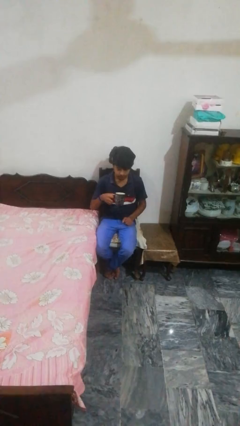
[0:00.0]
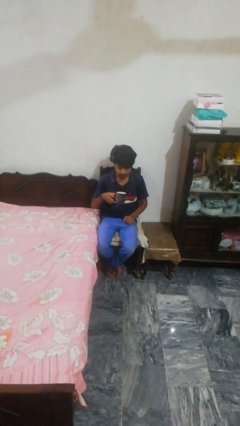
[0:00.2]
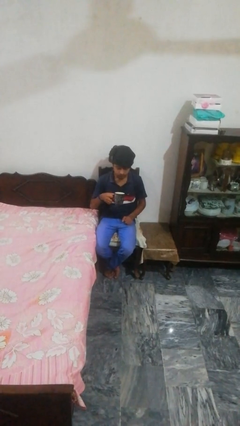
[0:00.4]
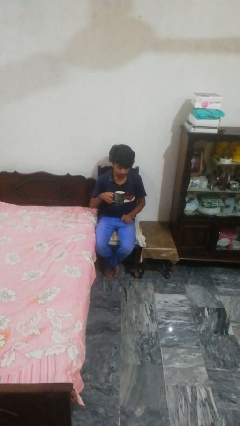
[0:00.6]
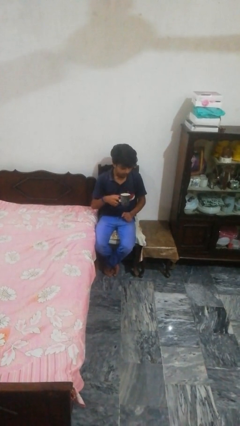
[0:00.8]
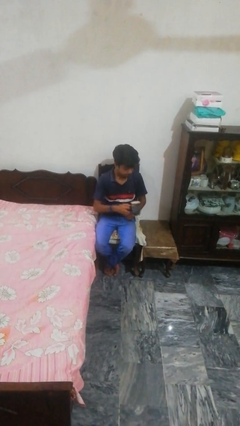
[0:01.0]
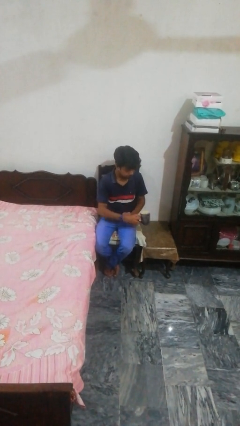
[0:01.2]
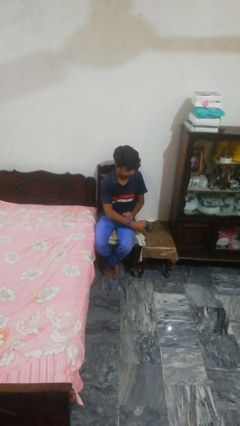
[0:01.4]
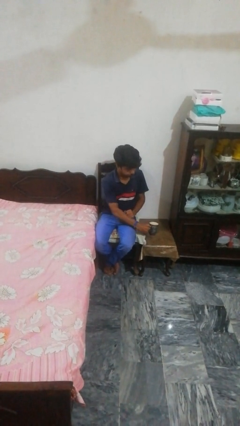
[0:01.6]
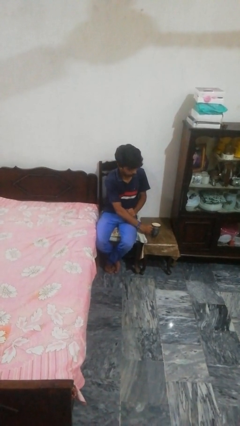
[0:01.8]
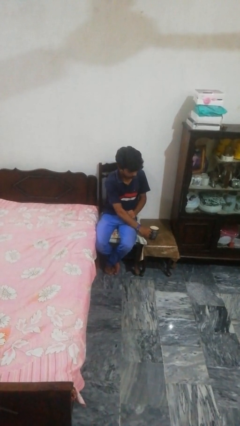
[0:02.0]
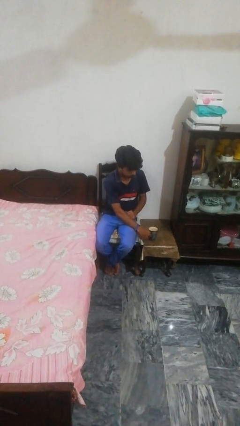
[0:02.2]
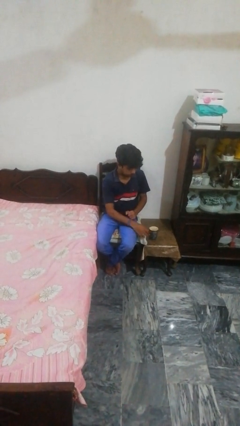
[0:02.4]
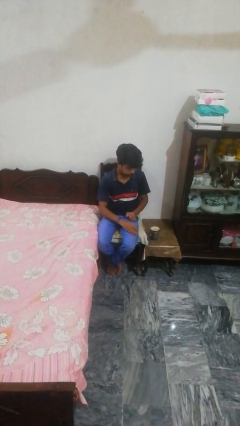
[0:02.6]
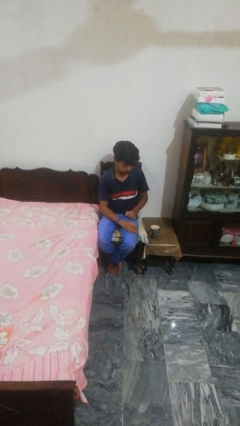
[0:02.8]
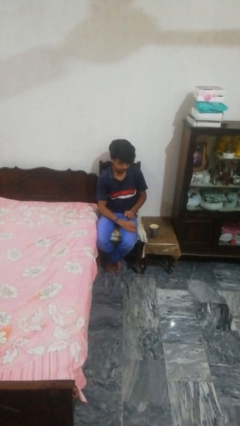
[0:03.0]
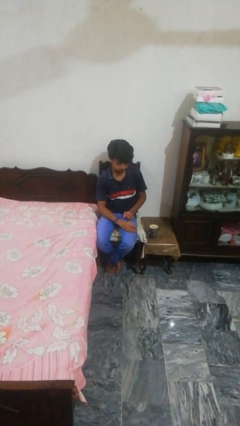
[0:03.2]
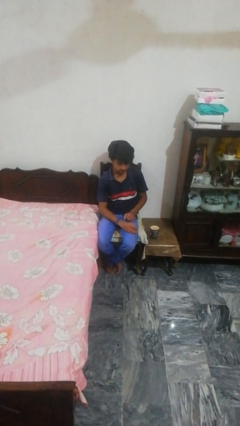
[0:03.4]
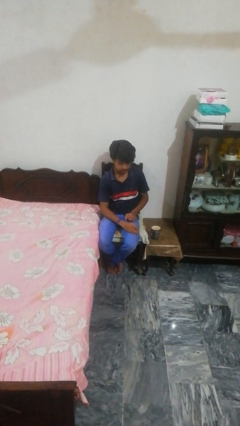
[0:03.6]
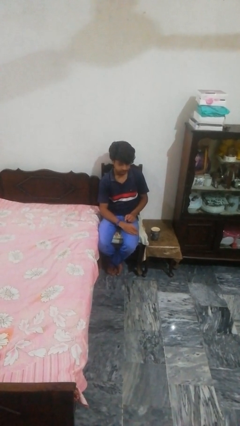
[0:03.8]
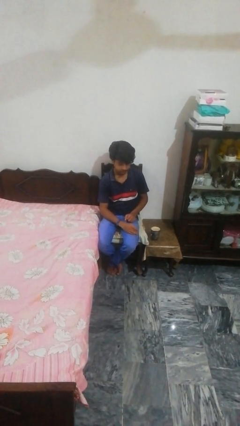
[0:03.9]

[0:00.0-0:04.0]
person puts down object on table

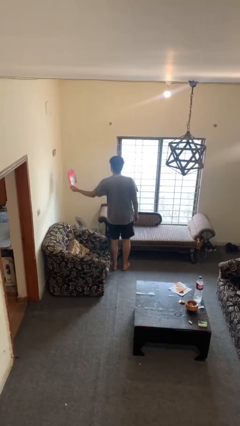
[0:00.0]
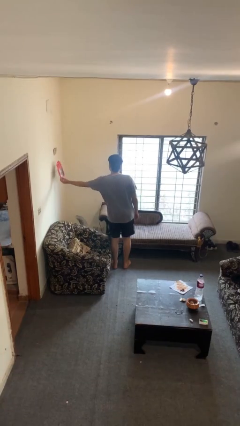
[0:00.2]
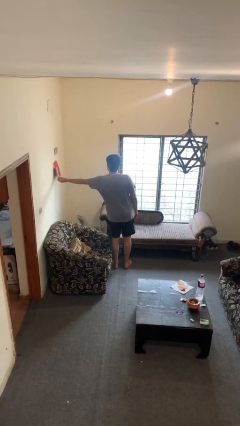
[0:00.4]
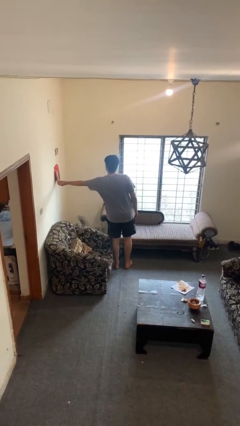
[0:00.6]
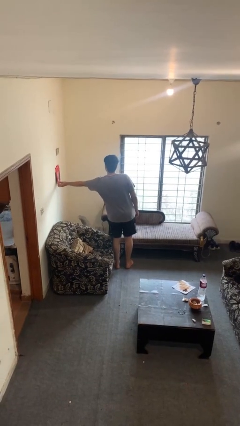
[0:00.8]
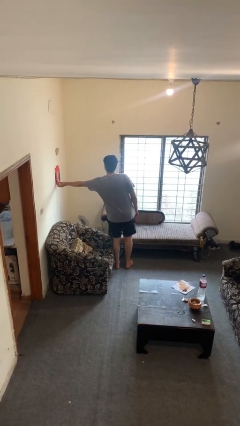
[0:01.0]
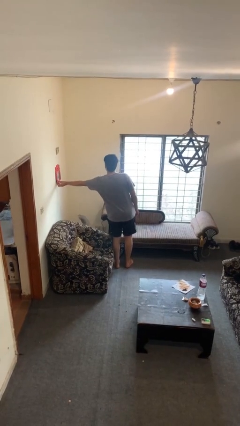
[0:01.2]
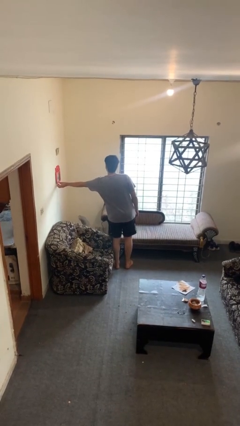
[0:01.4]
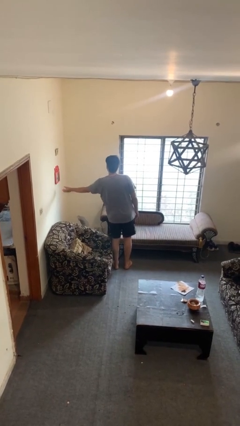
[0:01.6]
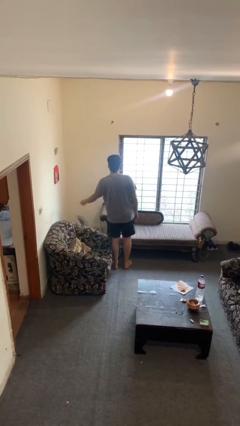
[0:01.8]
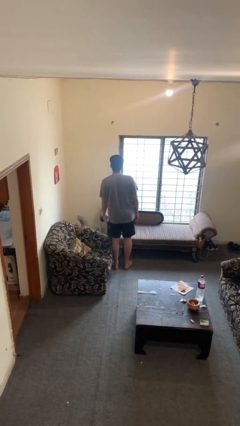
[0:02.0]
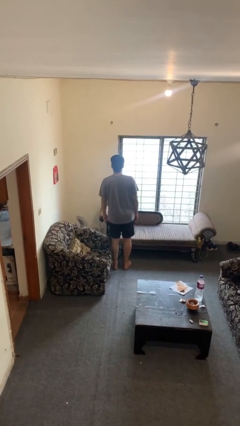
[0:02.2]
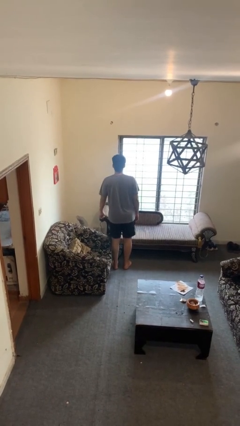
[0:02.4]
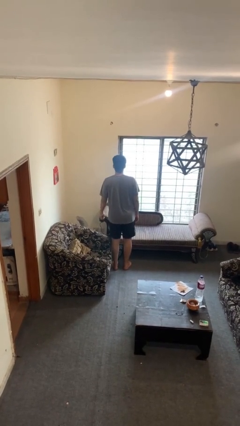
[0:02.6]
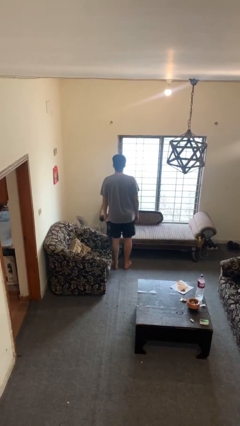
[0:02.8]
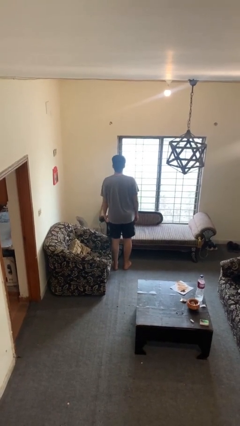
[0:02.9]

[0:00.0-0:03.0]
person puts up picture frame

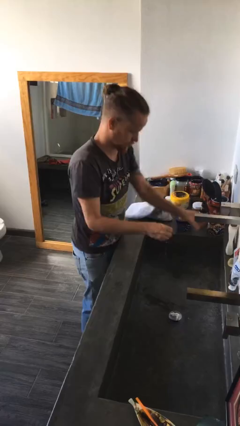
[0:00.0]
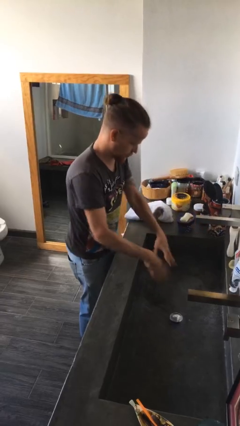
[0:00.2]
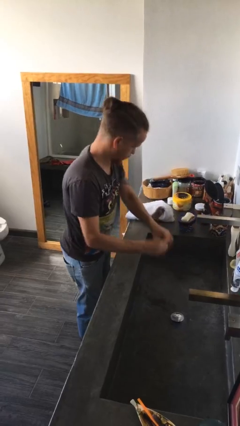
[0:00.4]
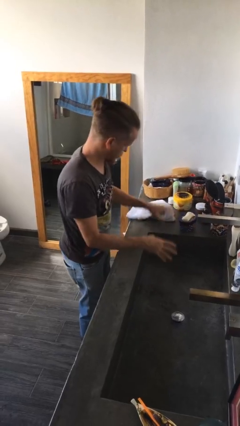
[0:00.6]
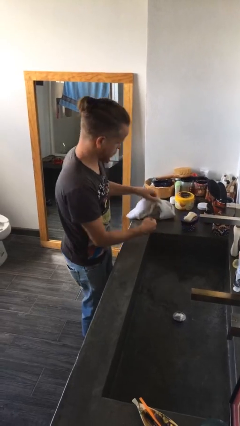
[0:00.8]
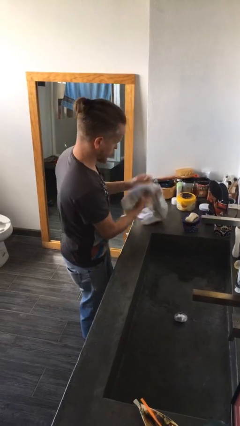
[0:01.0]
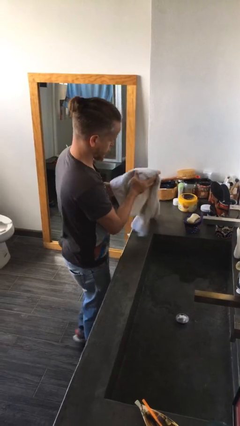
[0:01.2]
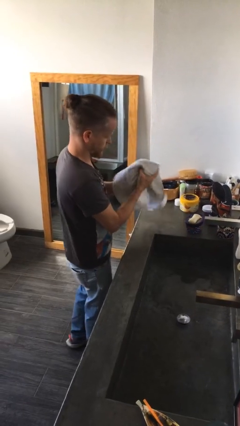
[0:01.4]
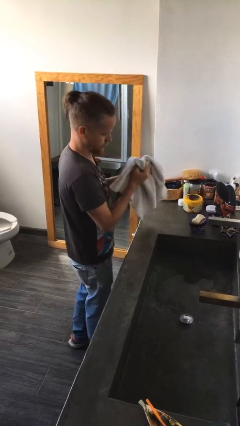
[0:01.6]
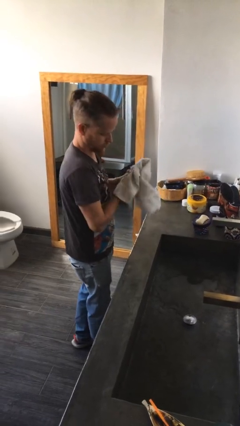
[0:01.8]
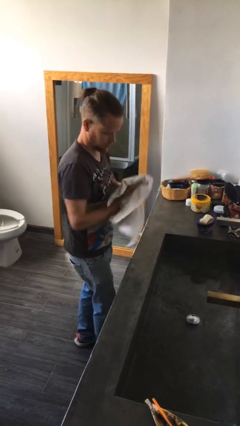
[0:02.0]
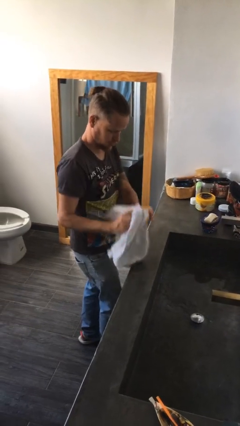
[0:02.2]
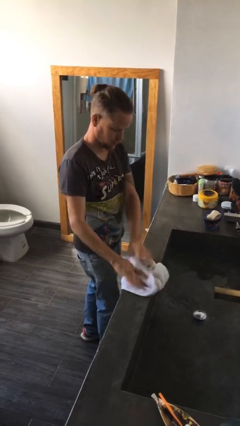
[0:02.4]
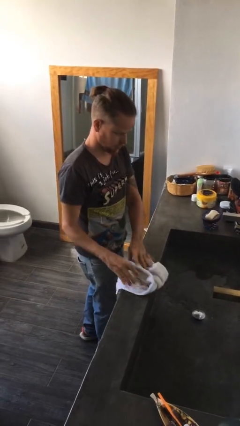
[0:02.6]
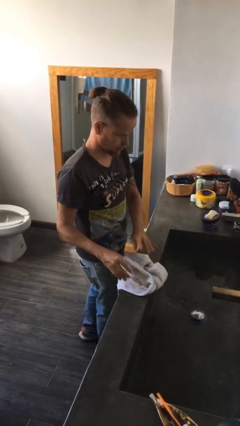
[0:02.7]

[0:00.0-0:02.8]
person dries hands with towel

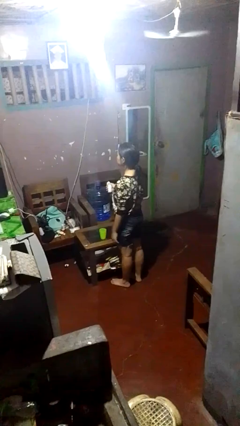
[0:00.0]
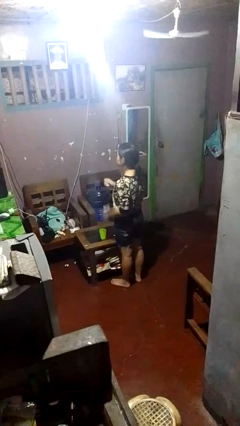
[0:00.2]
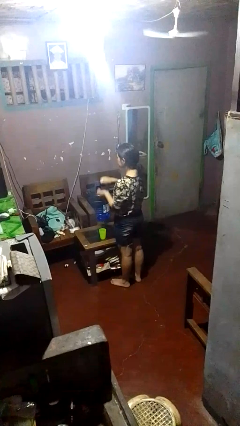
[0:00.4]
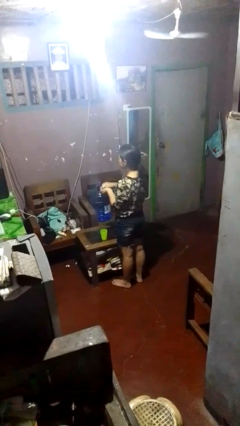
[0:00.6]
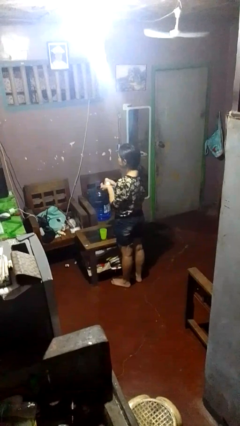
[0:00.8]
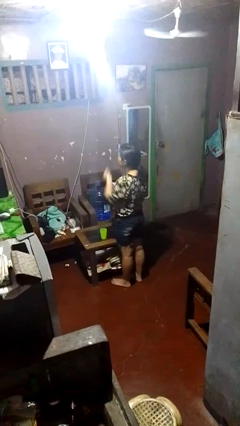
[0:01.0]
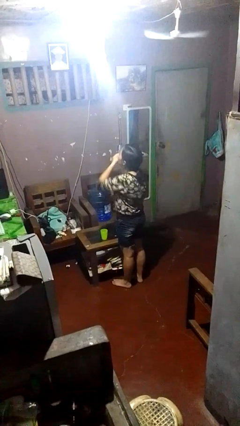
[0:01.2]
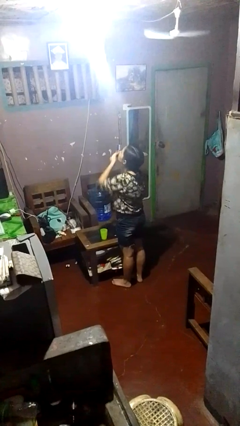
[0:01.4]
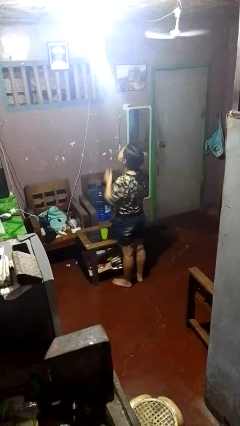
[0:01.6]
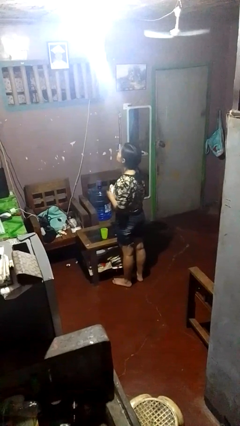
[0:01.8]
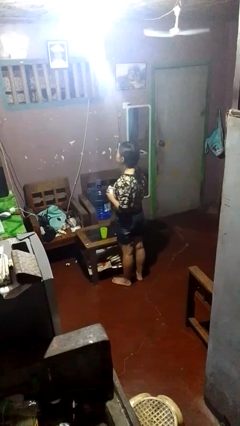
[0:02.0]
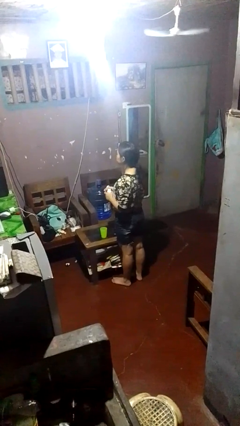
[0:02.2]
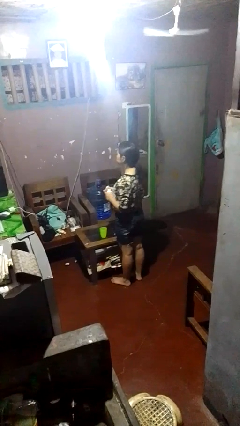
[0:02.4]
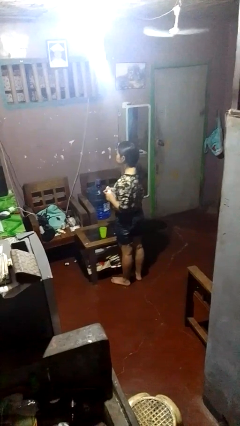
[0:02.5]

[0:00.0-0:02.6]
person takes medicine pills

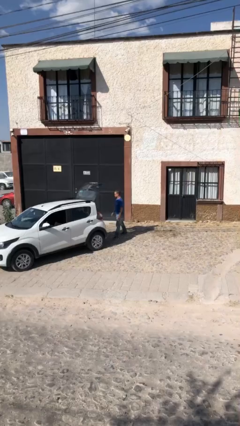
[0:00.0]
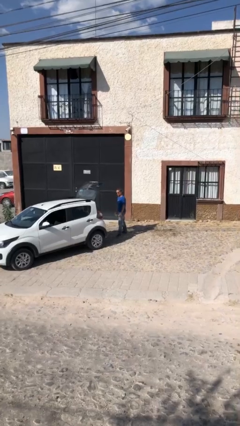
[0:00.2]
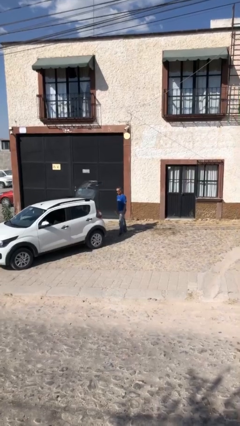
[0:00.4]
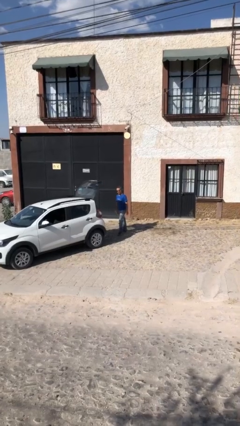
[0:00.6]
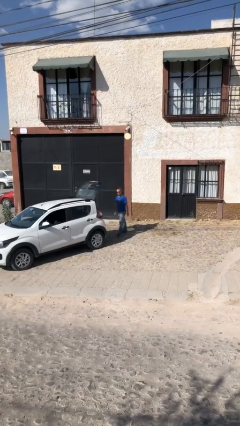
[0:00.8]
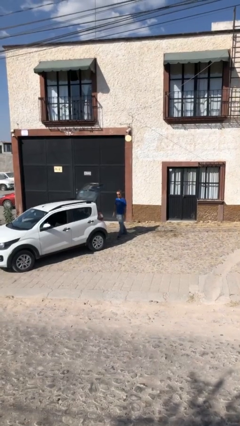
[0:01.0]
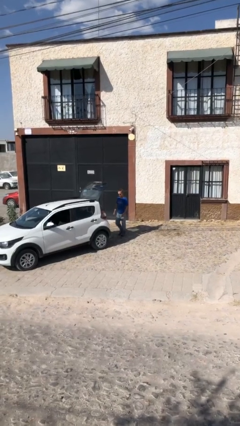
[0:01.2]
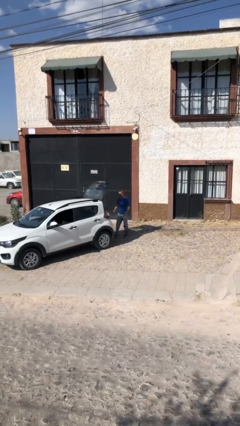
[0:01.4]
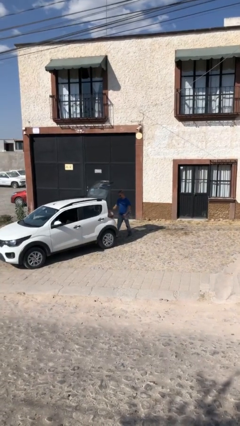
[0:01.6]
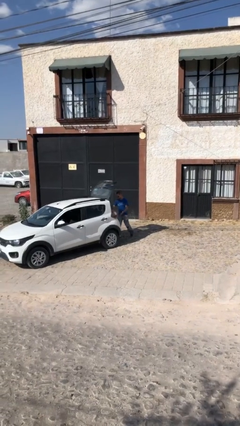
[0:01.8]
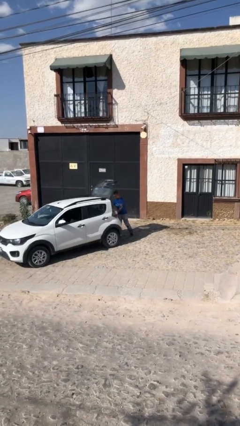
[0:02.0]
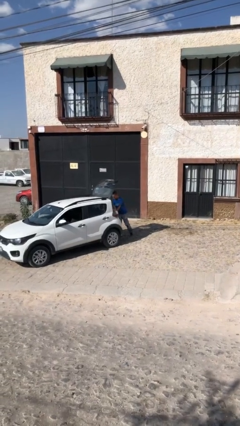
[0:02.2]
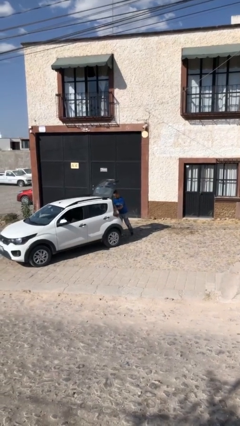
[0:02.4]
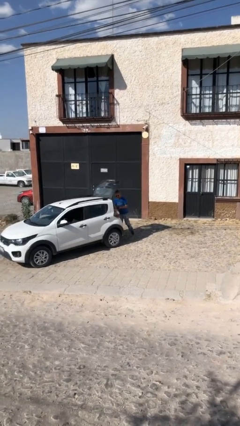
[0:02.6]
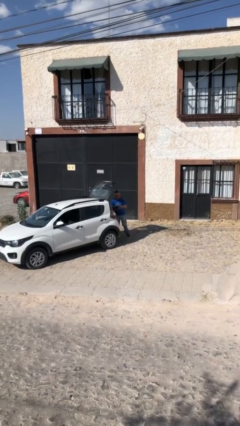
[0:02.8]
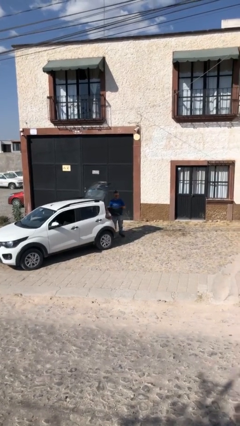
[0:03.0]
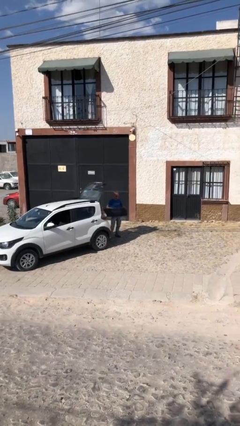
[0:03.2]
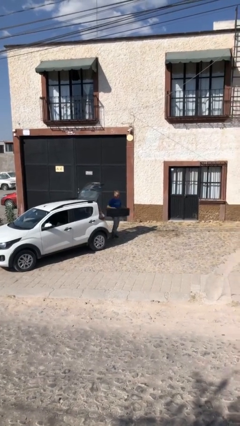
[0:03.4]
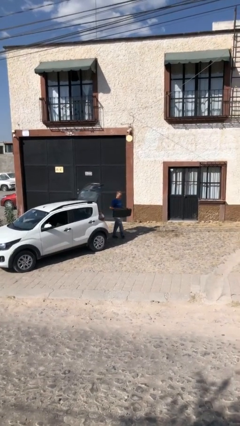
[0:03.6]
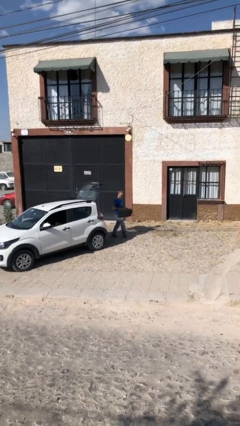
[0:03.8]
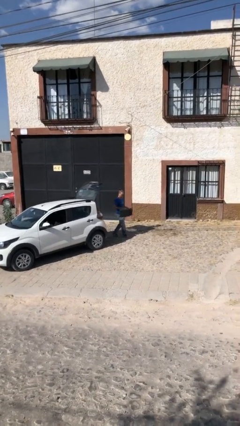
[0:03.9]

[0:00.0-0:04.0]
person unloads car

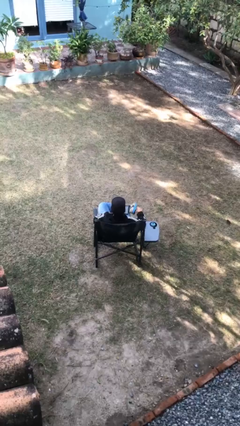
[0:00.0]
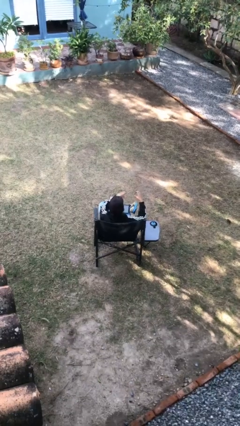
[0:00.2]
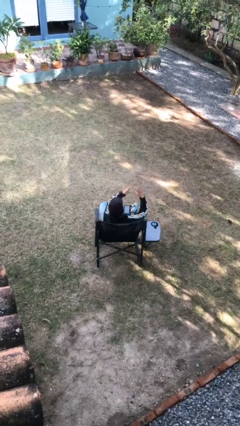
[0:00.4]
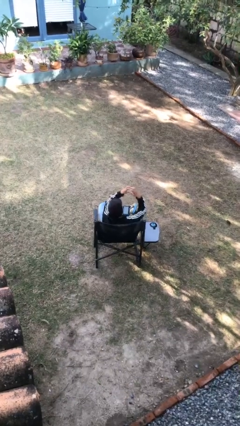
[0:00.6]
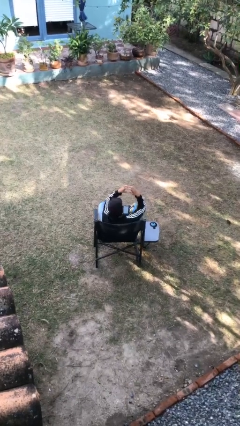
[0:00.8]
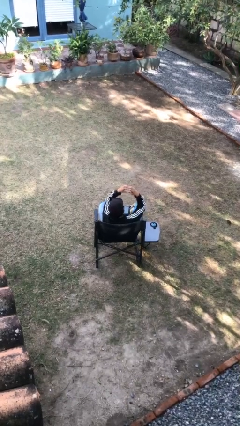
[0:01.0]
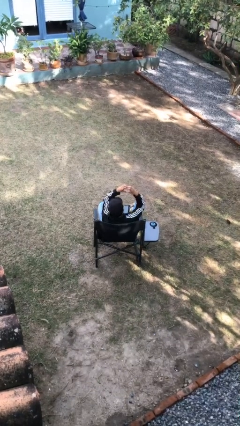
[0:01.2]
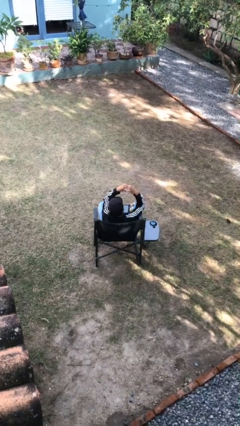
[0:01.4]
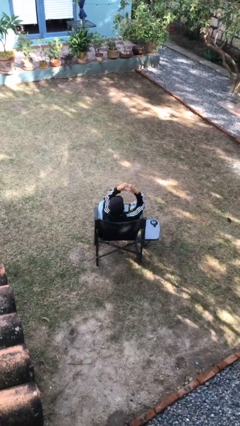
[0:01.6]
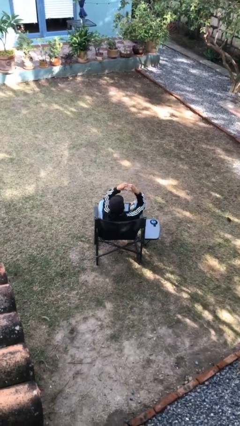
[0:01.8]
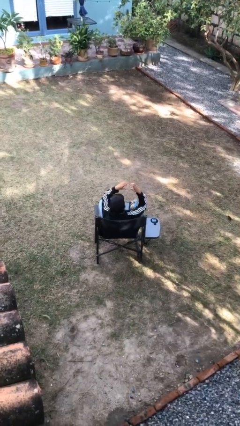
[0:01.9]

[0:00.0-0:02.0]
person gestures heart
